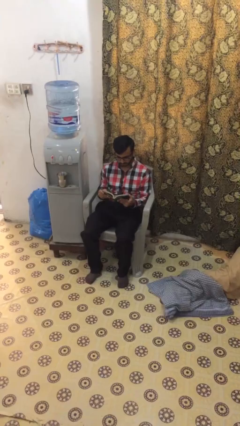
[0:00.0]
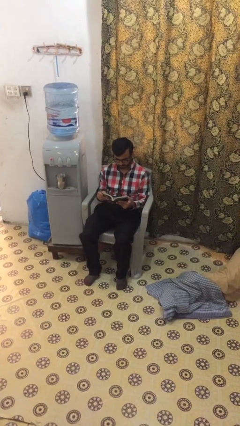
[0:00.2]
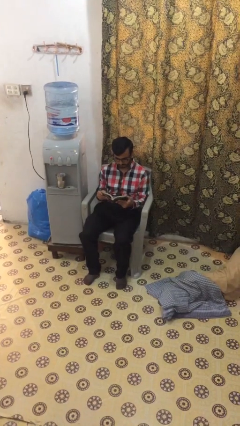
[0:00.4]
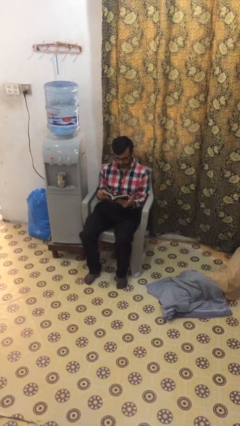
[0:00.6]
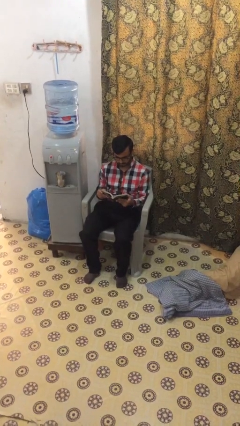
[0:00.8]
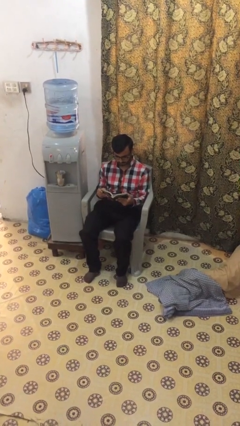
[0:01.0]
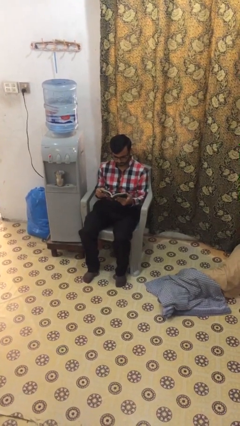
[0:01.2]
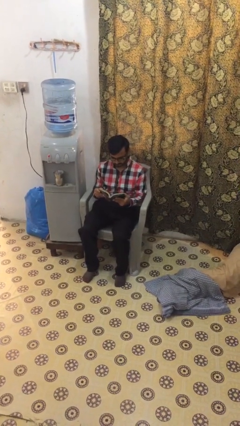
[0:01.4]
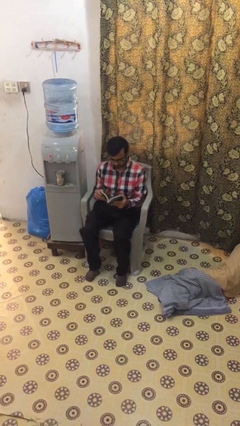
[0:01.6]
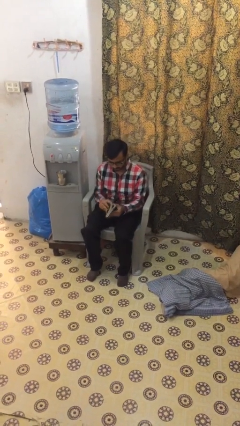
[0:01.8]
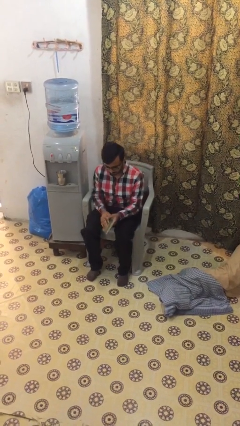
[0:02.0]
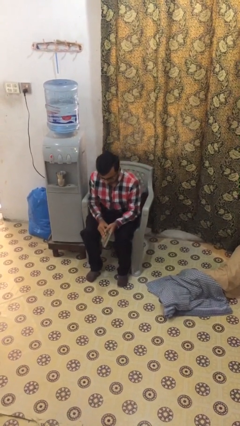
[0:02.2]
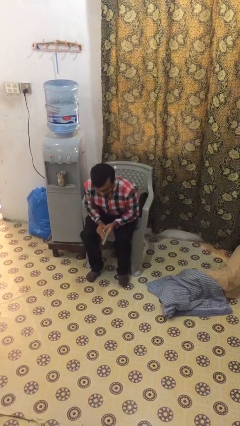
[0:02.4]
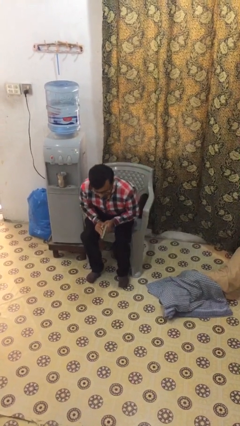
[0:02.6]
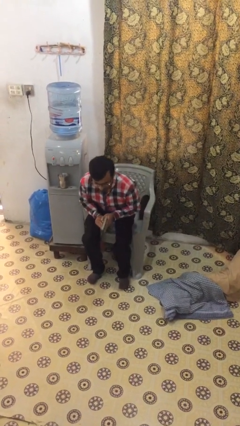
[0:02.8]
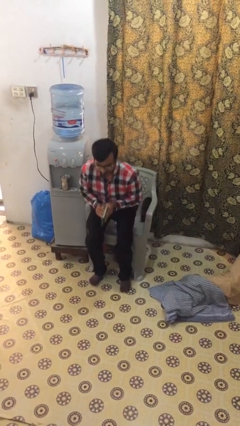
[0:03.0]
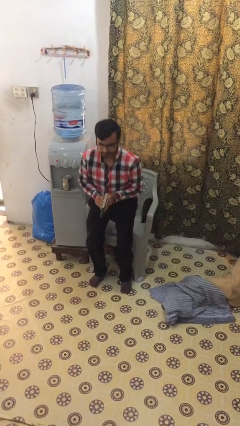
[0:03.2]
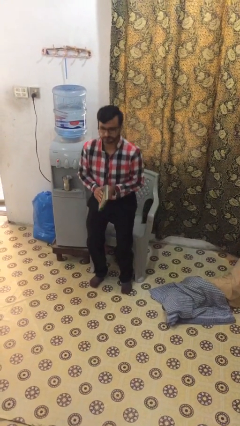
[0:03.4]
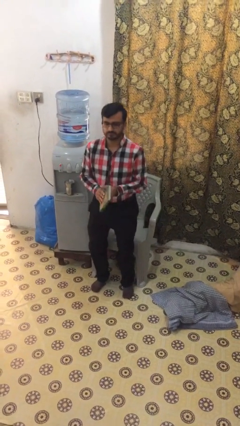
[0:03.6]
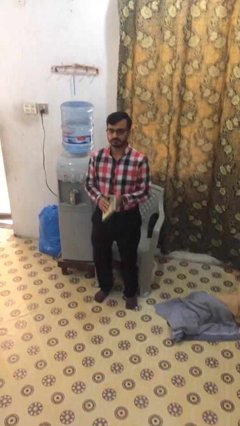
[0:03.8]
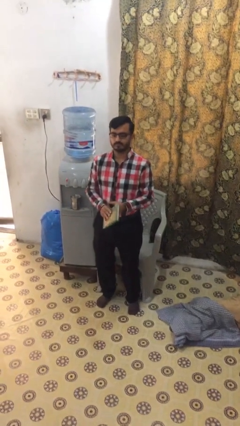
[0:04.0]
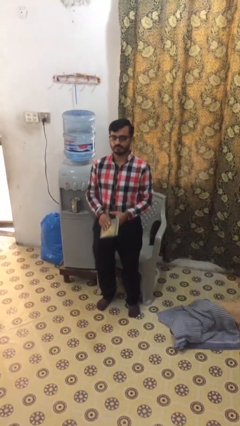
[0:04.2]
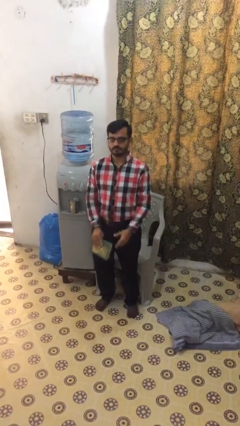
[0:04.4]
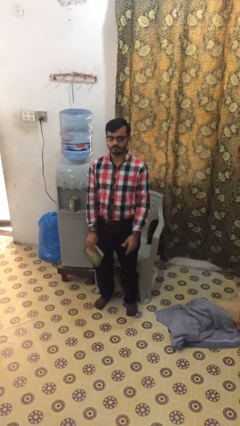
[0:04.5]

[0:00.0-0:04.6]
person stands up

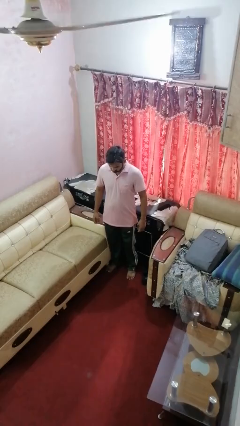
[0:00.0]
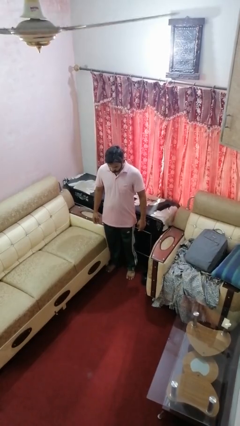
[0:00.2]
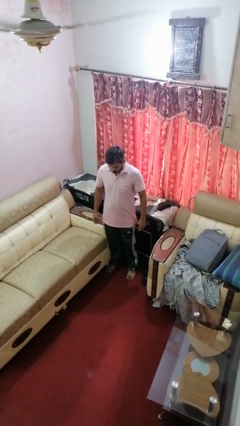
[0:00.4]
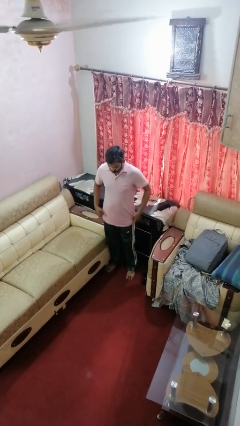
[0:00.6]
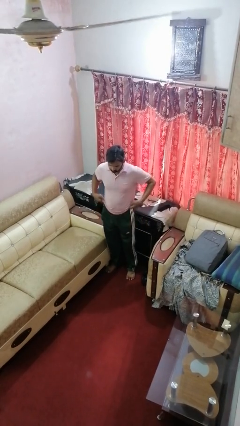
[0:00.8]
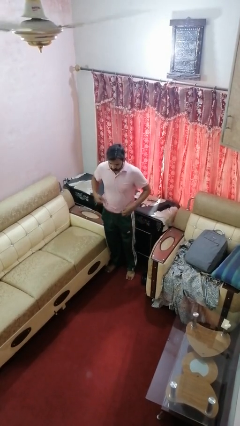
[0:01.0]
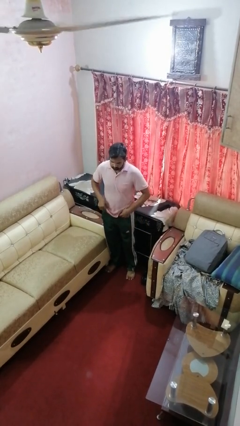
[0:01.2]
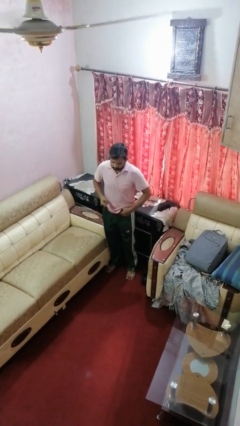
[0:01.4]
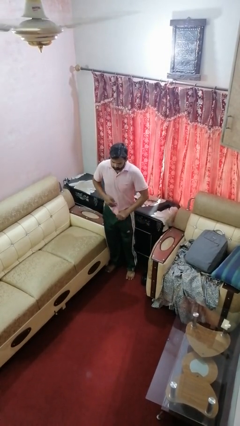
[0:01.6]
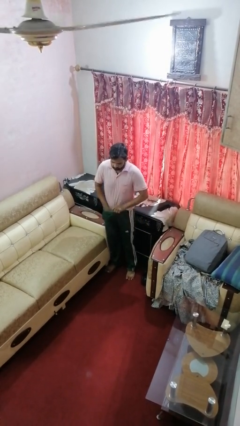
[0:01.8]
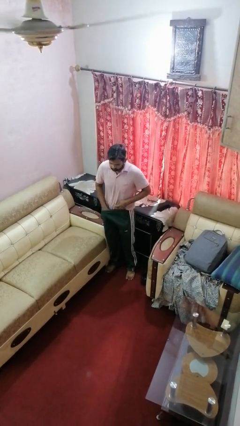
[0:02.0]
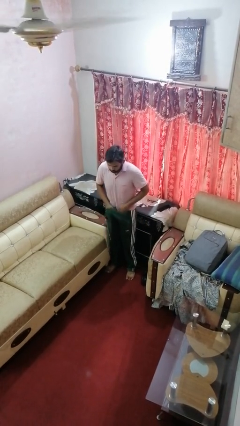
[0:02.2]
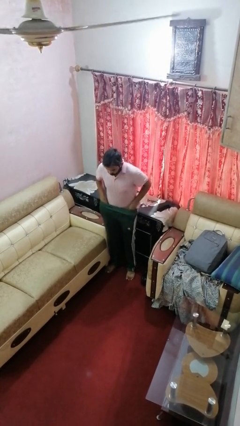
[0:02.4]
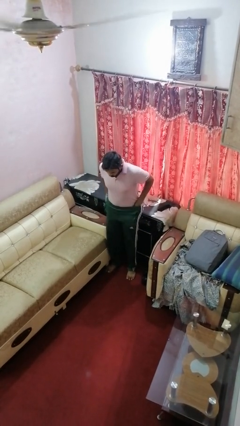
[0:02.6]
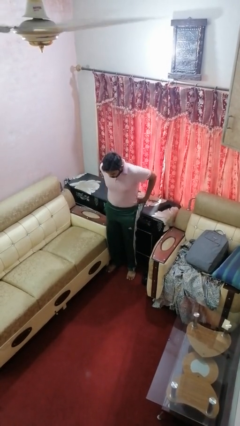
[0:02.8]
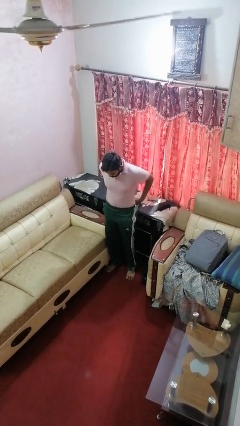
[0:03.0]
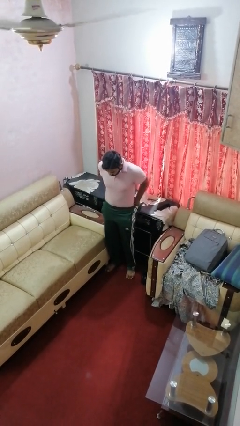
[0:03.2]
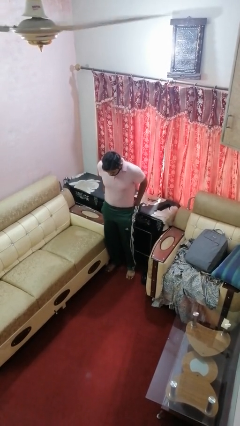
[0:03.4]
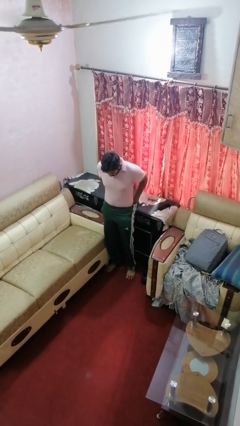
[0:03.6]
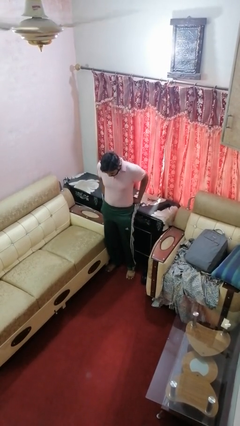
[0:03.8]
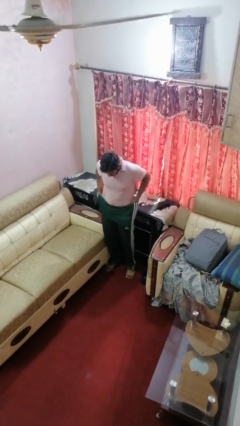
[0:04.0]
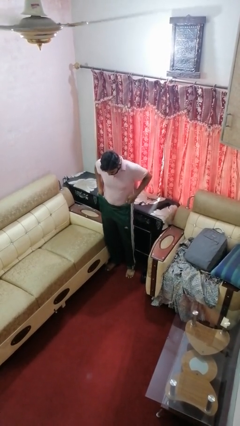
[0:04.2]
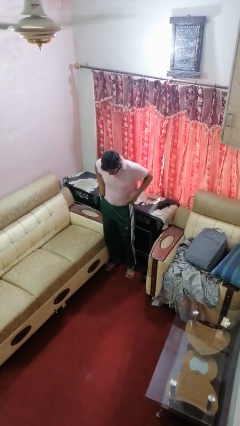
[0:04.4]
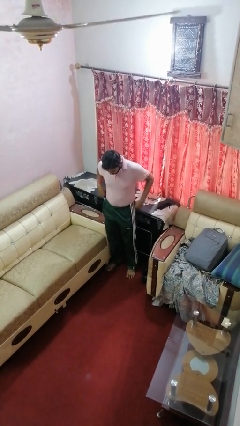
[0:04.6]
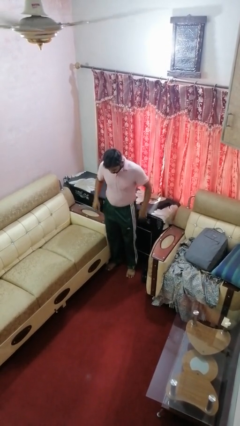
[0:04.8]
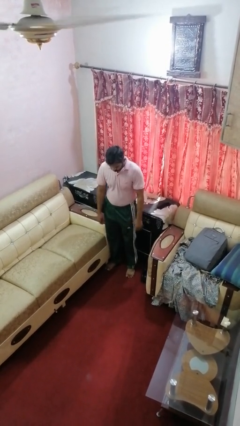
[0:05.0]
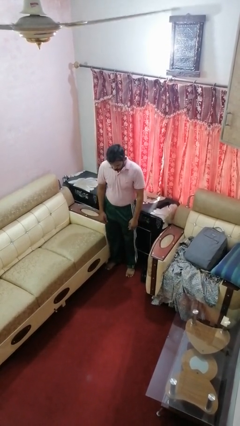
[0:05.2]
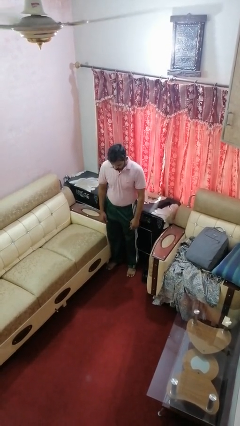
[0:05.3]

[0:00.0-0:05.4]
person tucks in shirt

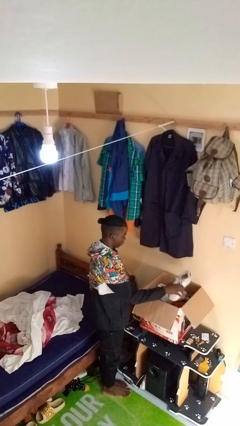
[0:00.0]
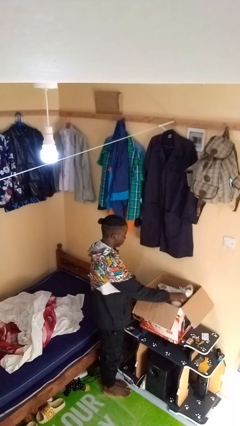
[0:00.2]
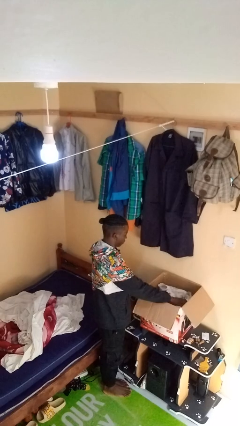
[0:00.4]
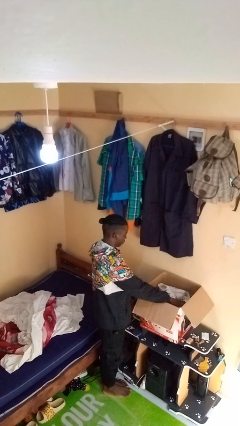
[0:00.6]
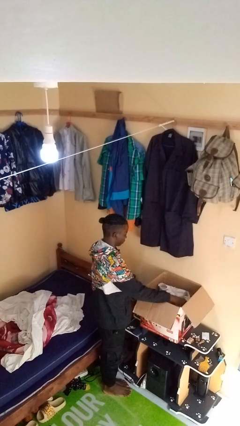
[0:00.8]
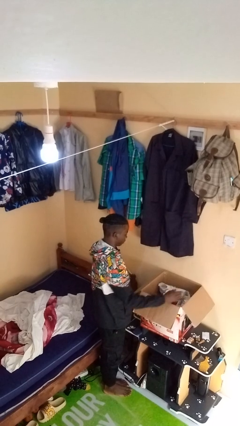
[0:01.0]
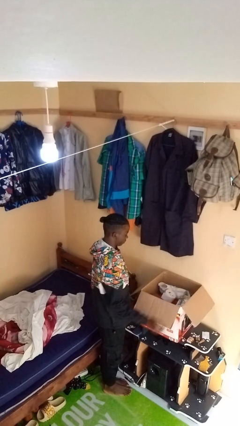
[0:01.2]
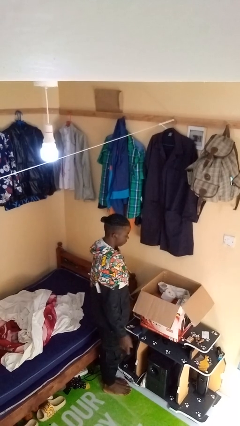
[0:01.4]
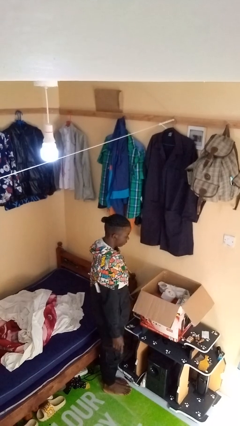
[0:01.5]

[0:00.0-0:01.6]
person puts object into box

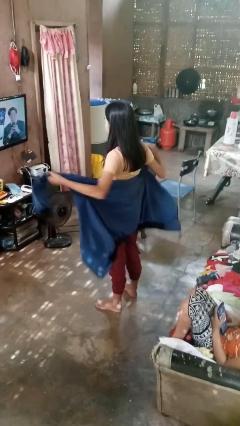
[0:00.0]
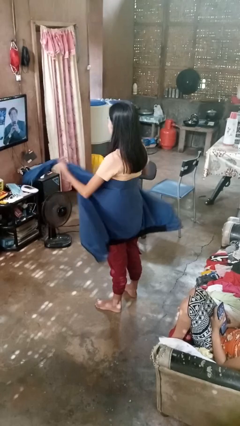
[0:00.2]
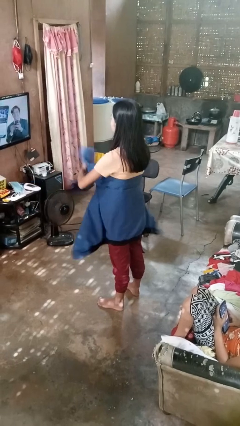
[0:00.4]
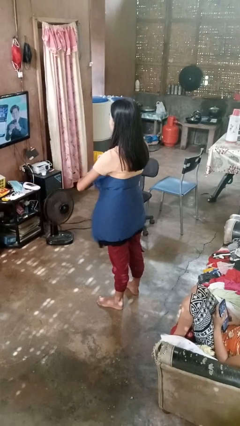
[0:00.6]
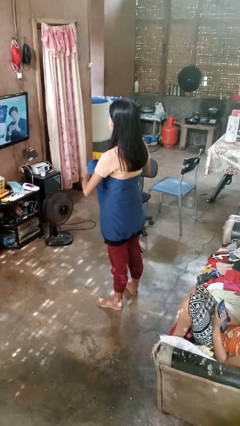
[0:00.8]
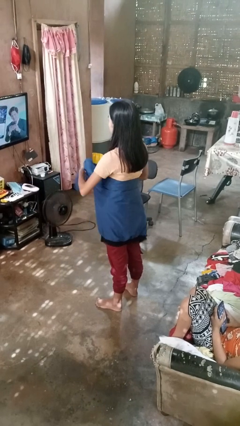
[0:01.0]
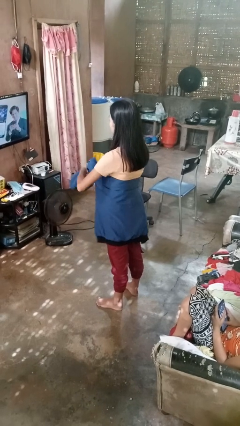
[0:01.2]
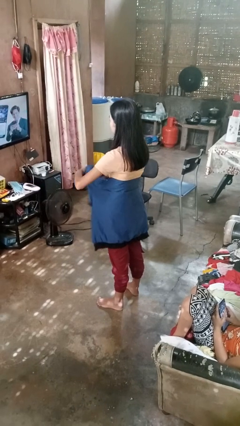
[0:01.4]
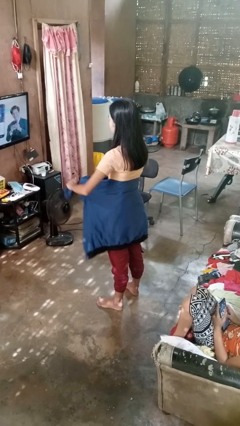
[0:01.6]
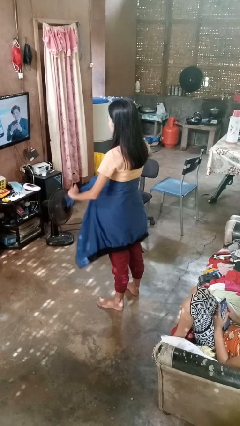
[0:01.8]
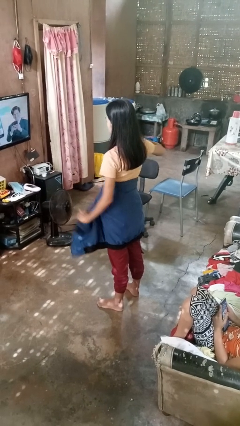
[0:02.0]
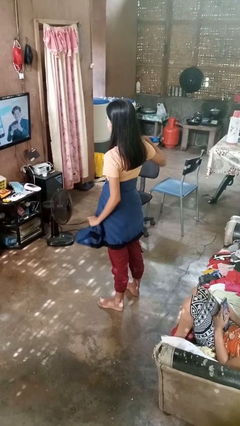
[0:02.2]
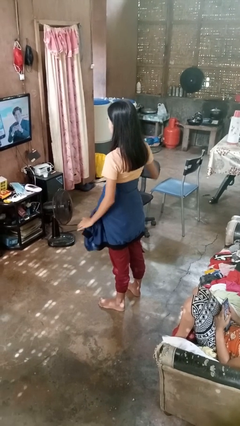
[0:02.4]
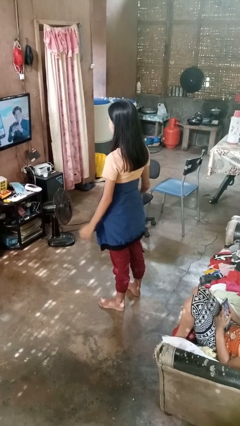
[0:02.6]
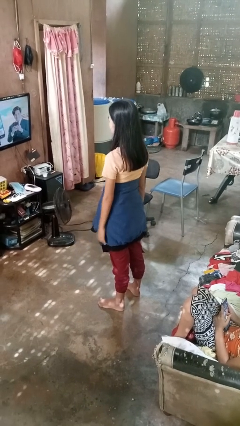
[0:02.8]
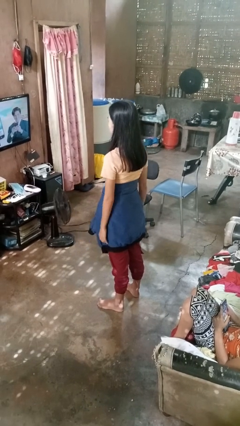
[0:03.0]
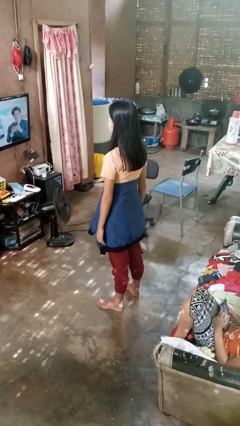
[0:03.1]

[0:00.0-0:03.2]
person ties jacket around waist

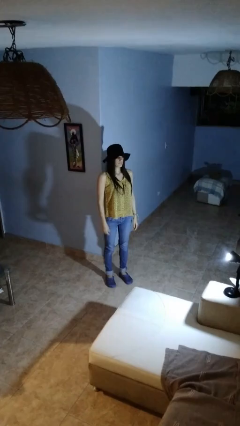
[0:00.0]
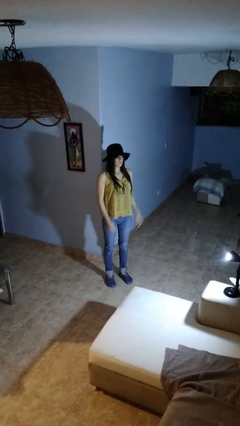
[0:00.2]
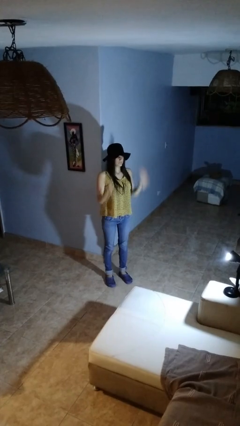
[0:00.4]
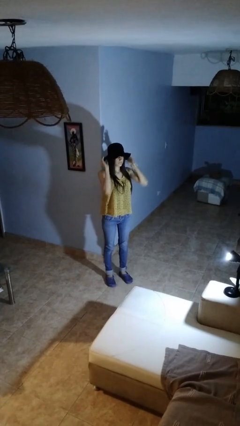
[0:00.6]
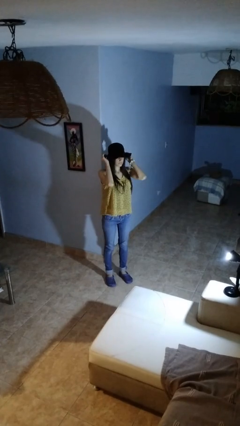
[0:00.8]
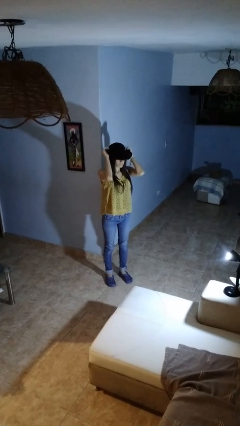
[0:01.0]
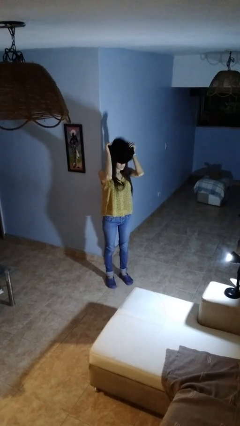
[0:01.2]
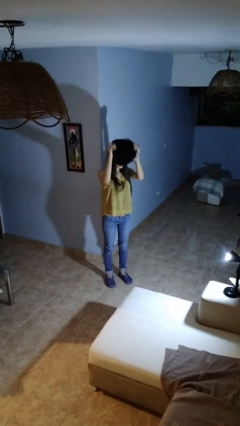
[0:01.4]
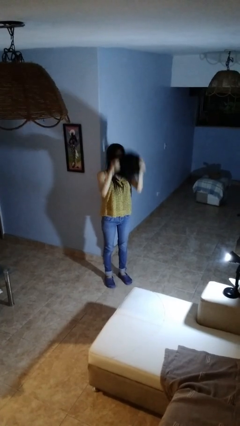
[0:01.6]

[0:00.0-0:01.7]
person takes off hat

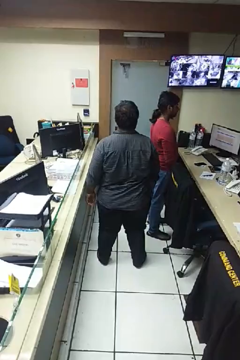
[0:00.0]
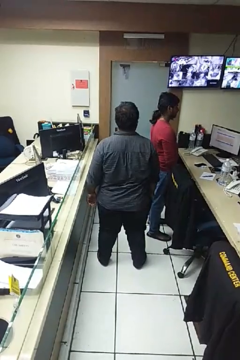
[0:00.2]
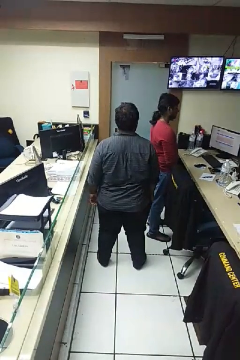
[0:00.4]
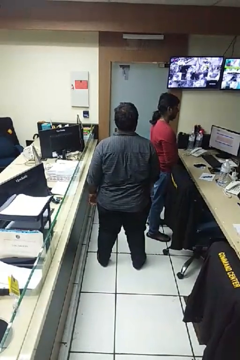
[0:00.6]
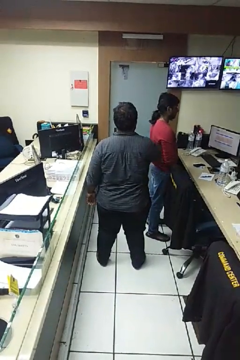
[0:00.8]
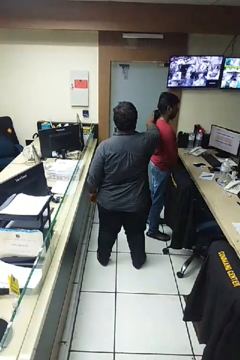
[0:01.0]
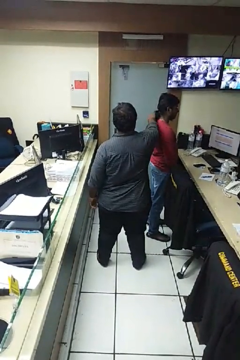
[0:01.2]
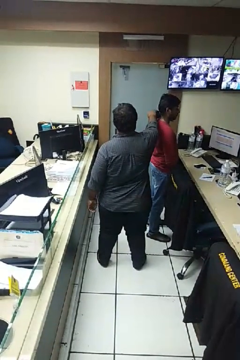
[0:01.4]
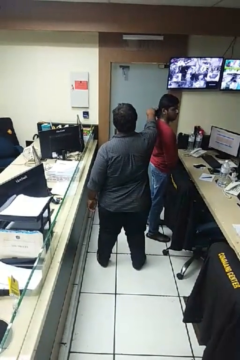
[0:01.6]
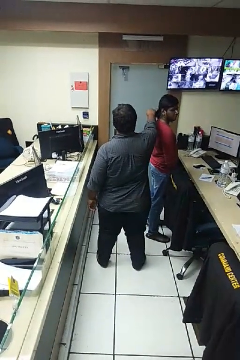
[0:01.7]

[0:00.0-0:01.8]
person grabs person by hair
